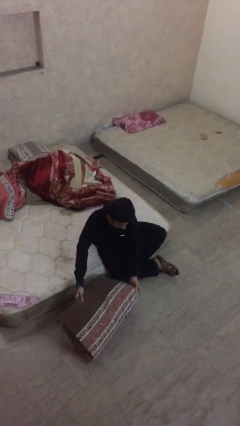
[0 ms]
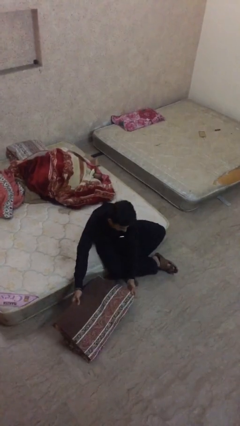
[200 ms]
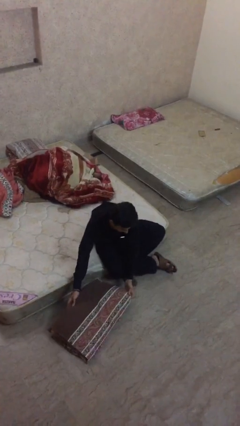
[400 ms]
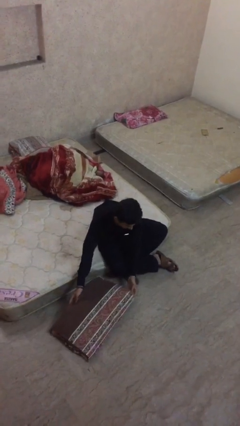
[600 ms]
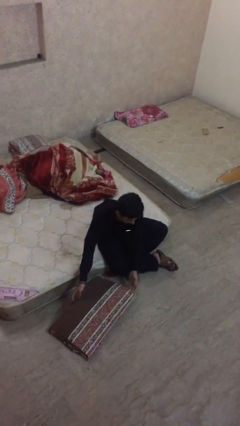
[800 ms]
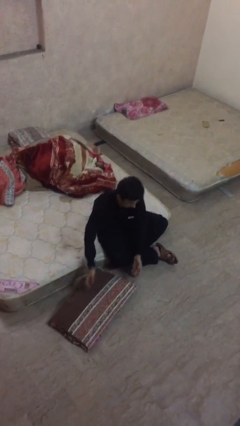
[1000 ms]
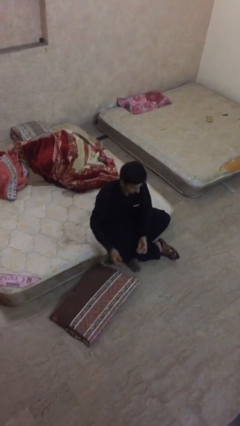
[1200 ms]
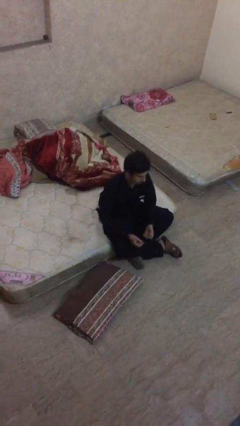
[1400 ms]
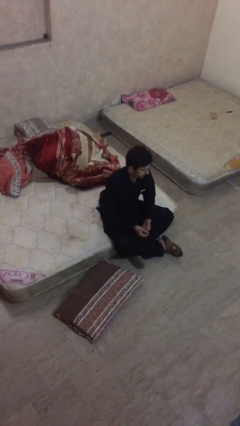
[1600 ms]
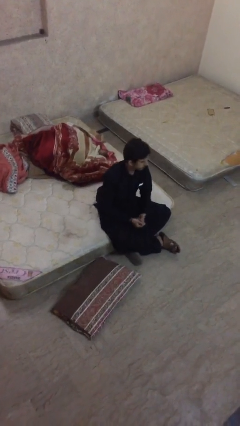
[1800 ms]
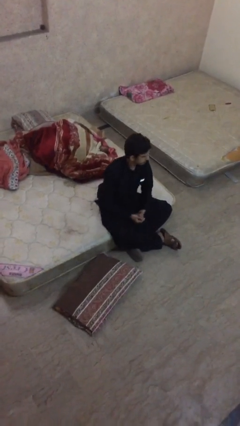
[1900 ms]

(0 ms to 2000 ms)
person puts down object on floor

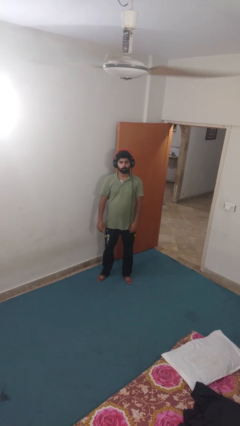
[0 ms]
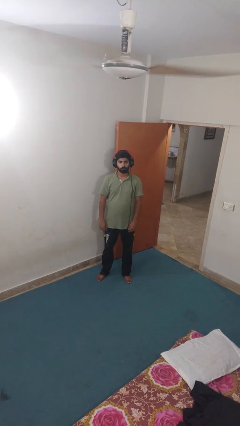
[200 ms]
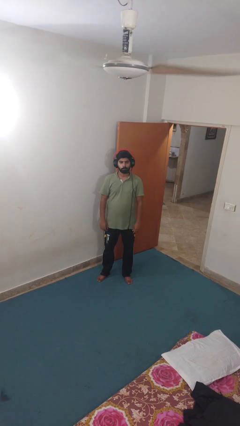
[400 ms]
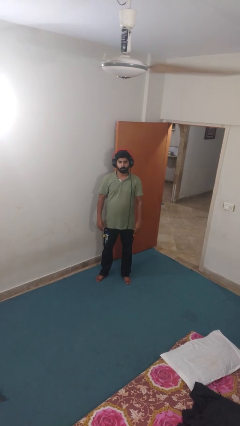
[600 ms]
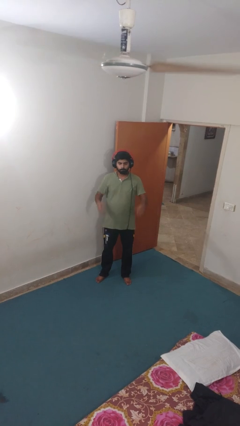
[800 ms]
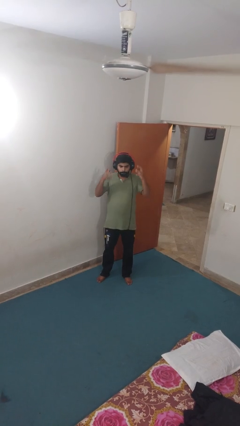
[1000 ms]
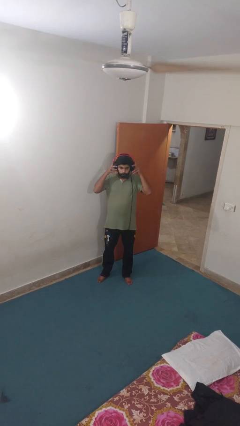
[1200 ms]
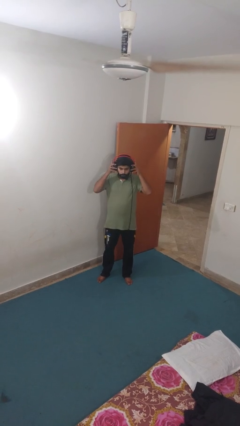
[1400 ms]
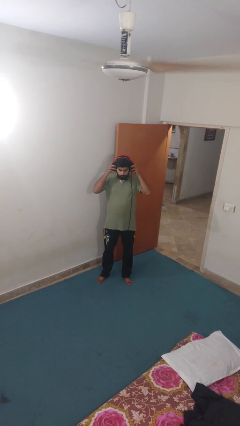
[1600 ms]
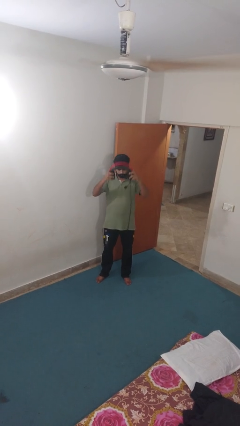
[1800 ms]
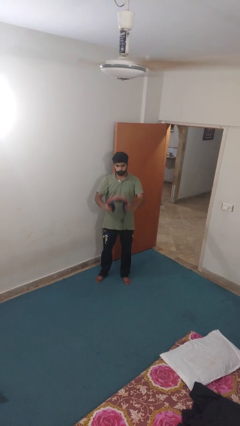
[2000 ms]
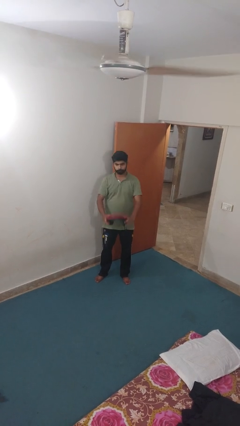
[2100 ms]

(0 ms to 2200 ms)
person takes off headphones

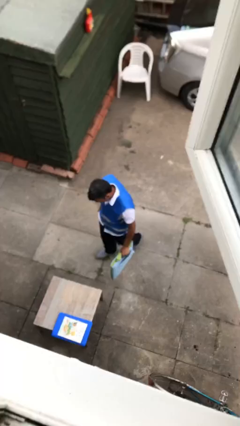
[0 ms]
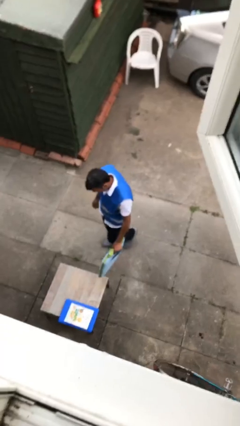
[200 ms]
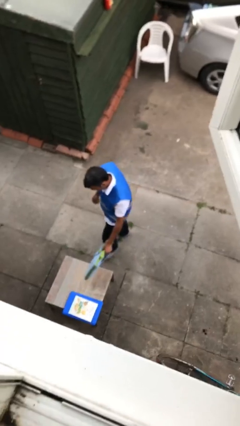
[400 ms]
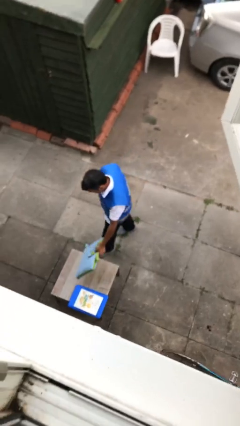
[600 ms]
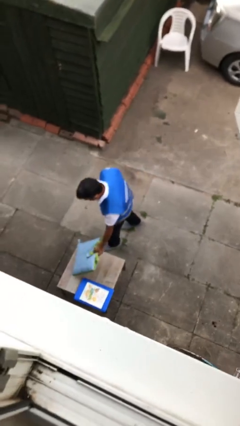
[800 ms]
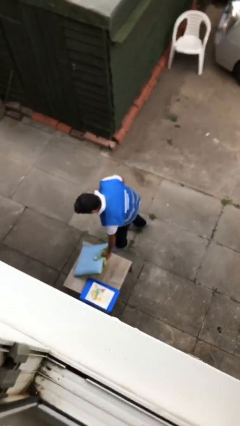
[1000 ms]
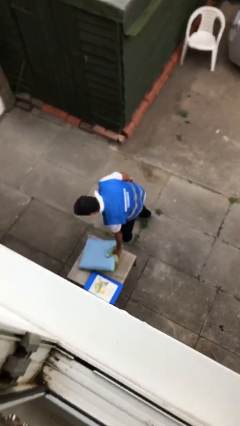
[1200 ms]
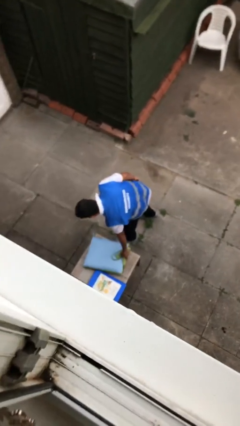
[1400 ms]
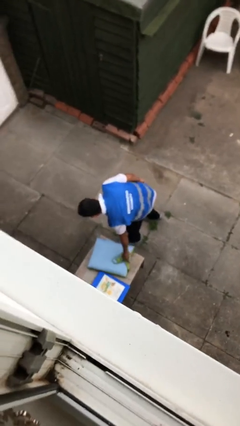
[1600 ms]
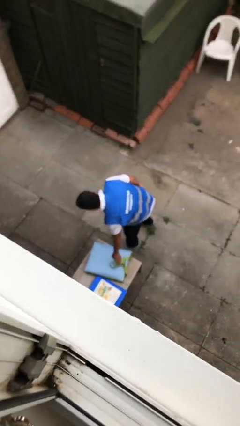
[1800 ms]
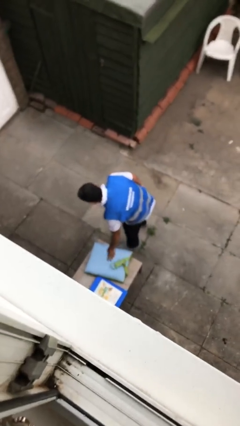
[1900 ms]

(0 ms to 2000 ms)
person puts down object on table

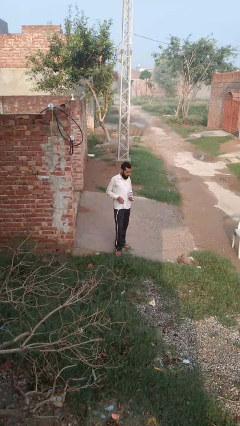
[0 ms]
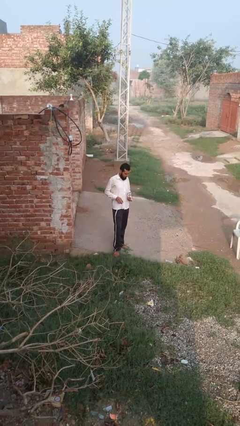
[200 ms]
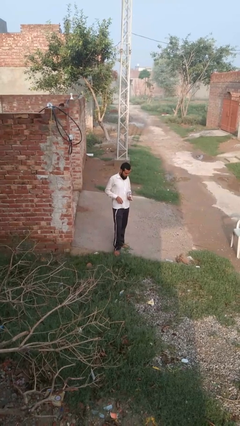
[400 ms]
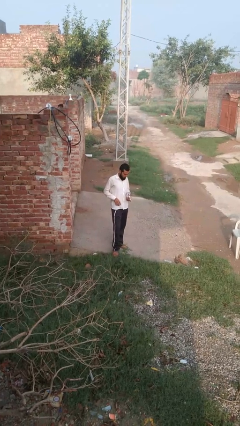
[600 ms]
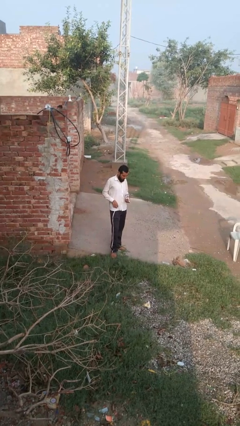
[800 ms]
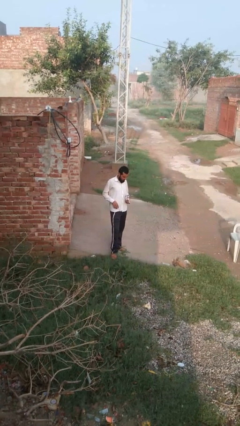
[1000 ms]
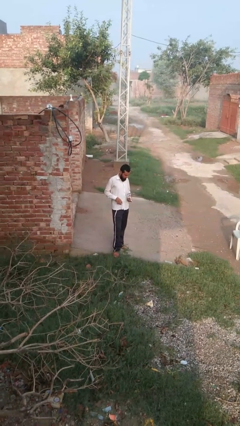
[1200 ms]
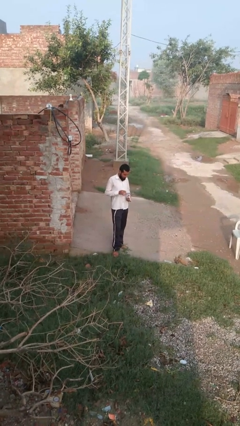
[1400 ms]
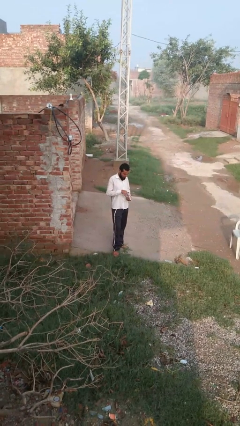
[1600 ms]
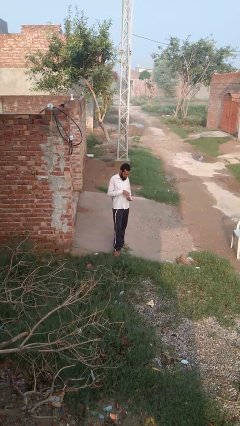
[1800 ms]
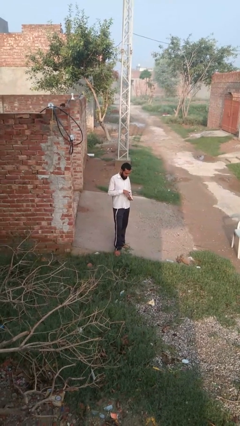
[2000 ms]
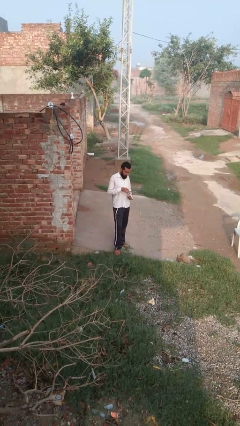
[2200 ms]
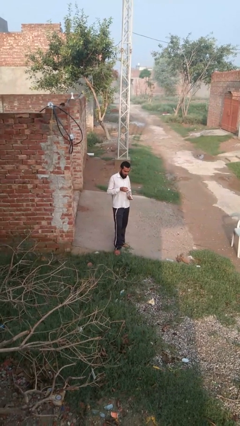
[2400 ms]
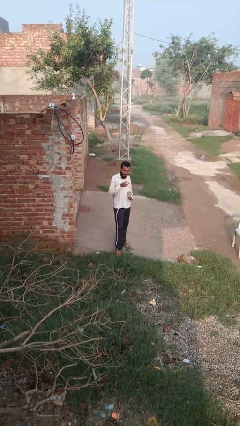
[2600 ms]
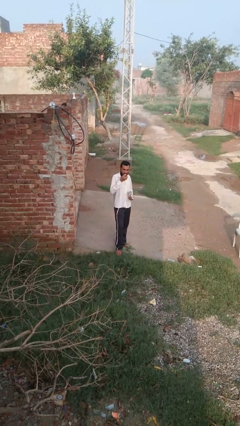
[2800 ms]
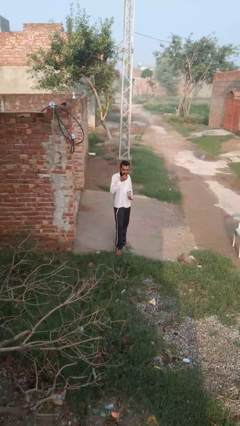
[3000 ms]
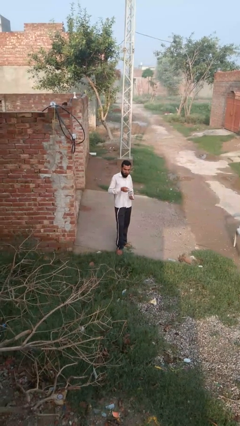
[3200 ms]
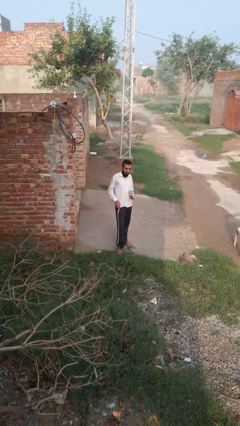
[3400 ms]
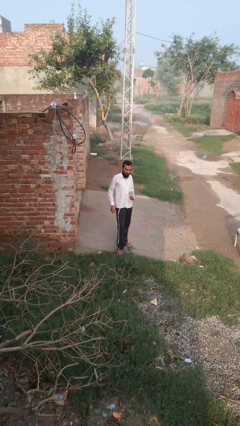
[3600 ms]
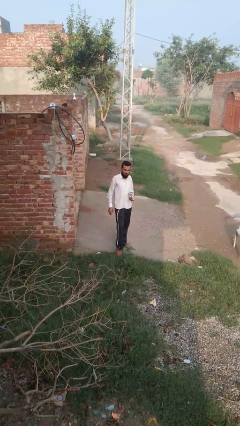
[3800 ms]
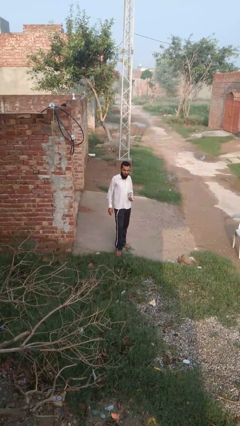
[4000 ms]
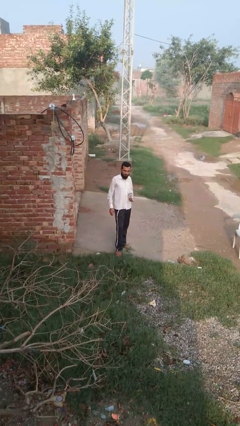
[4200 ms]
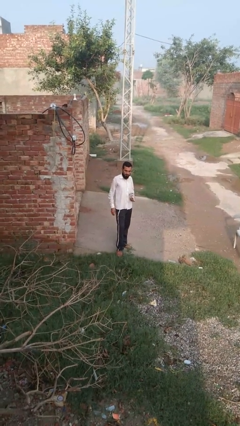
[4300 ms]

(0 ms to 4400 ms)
person eats snack from bag

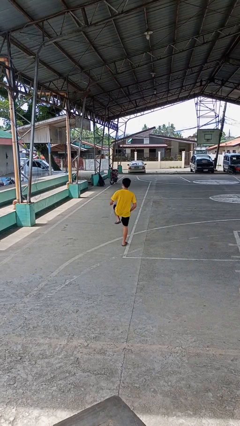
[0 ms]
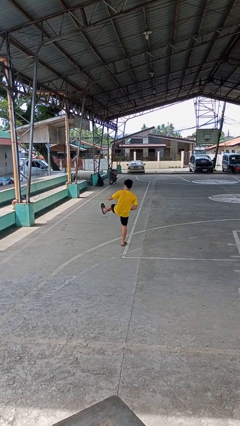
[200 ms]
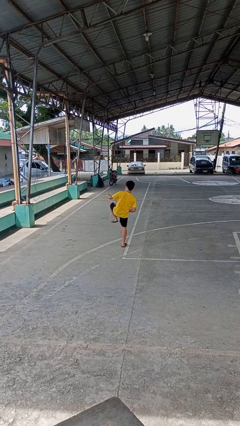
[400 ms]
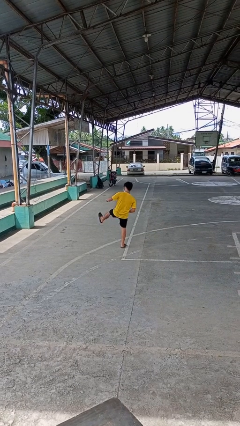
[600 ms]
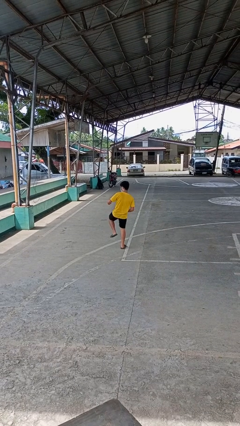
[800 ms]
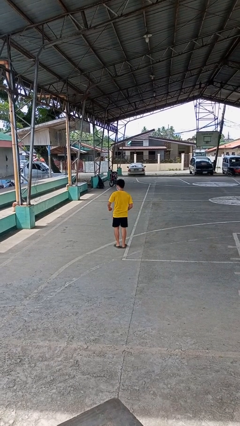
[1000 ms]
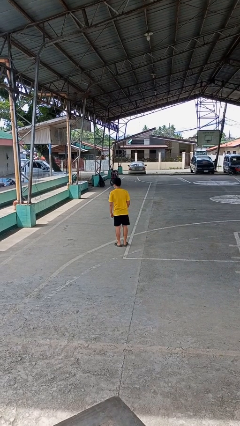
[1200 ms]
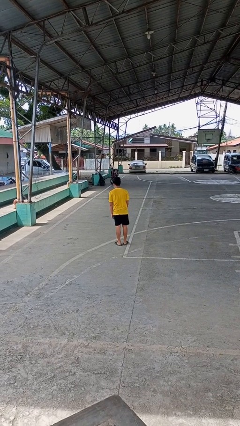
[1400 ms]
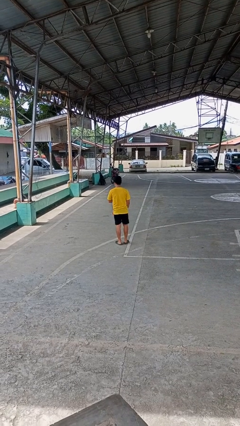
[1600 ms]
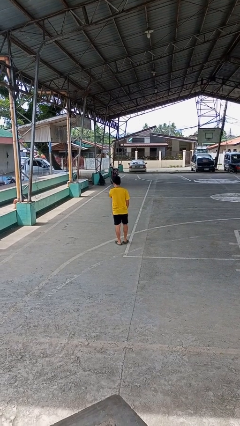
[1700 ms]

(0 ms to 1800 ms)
person karate kicks

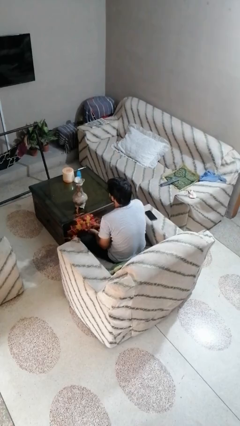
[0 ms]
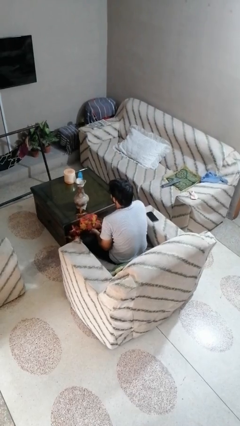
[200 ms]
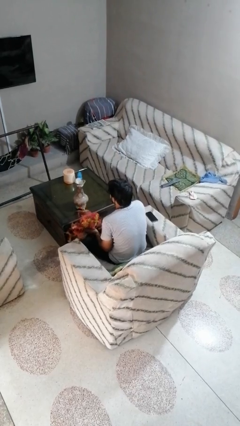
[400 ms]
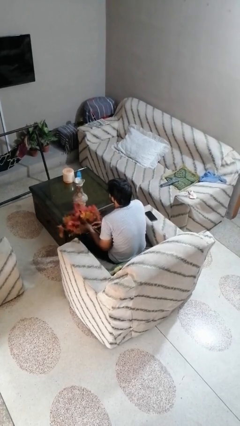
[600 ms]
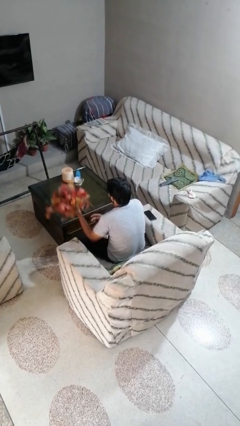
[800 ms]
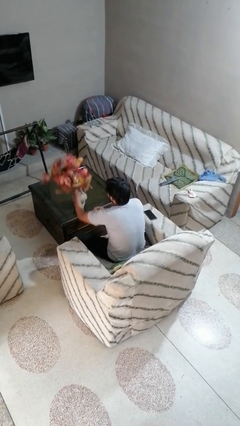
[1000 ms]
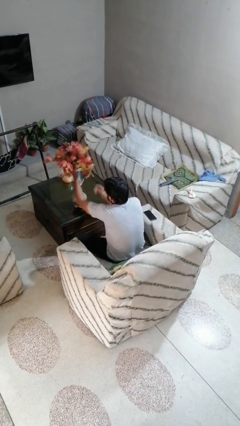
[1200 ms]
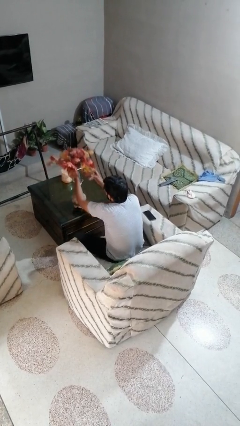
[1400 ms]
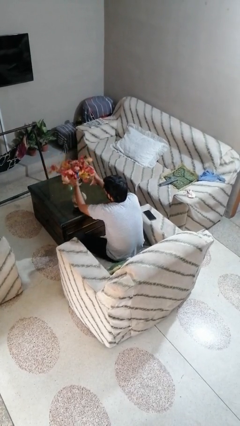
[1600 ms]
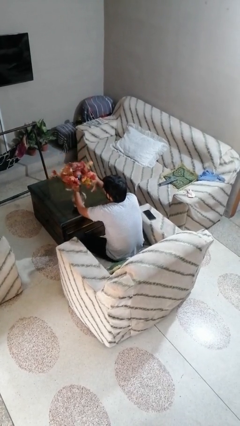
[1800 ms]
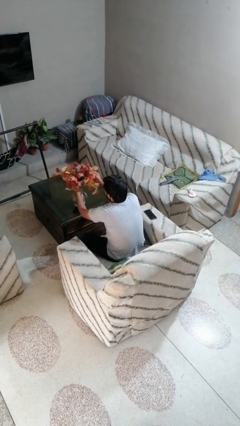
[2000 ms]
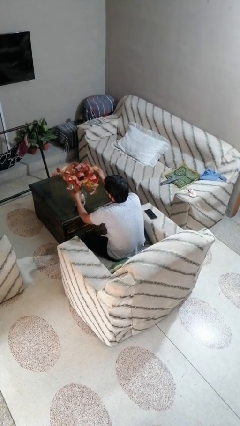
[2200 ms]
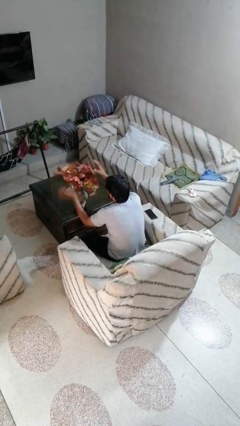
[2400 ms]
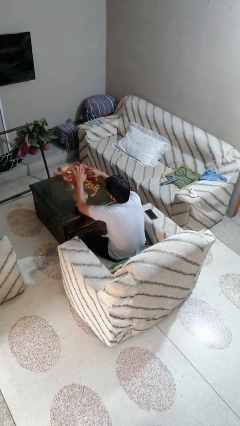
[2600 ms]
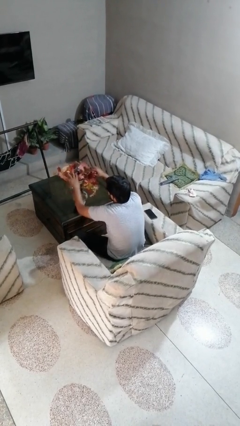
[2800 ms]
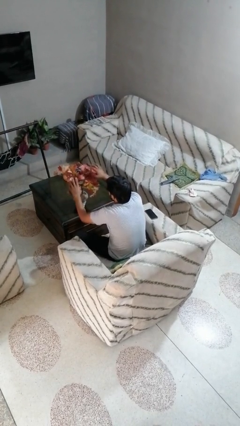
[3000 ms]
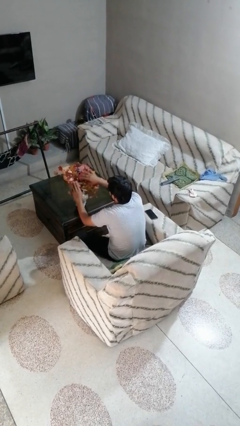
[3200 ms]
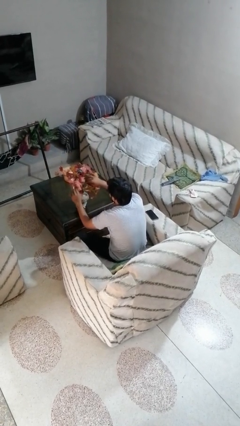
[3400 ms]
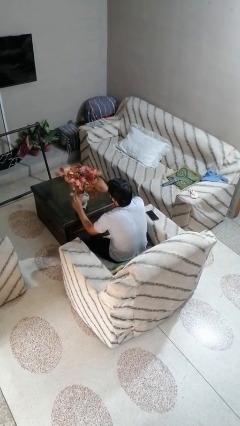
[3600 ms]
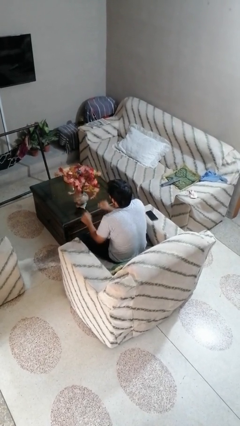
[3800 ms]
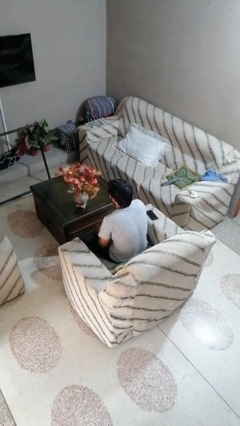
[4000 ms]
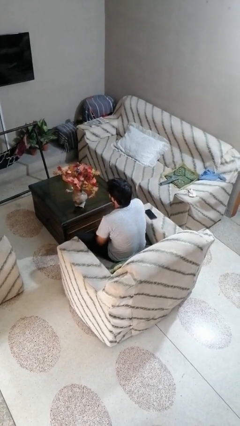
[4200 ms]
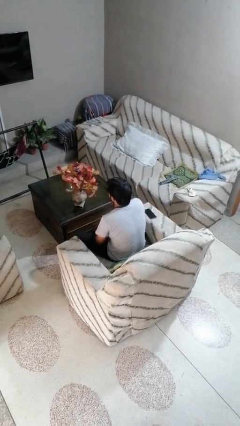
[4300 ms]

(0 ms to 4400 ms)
person arranges flowers in vase

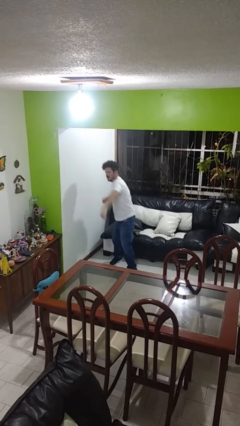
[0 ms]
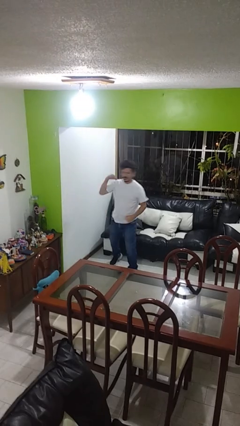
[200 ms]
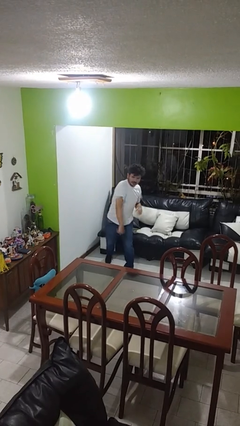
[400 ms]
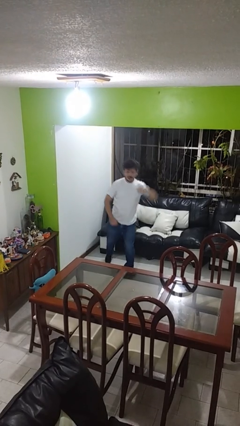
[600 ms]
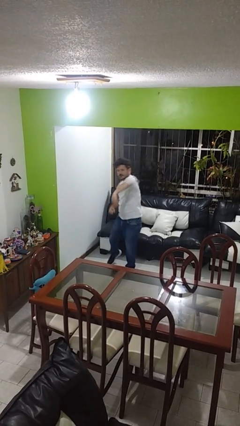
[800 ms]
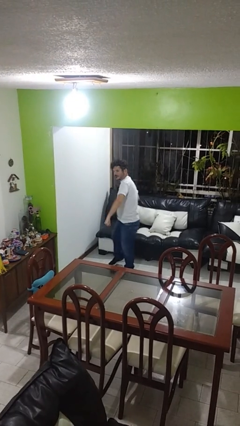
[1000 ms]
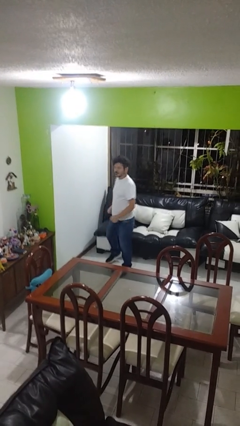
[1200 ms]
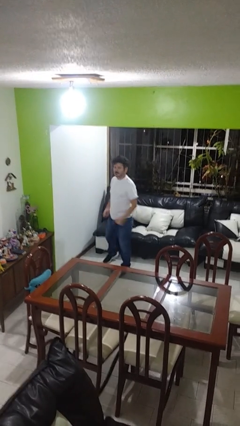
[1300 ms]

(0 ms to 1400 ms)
person punches
